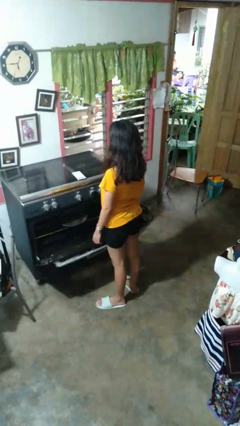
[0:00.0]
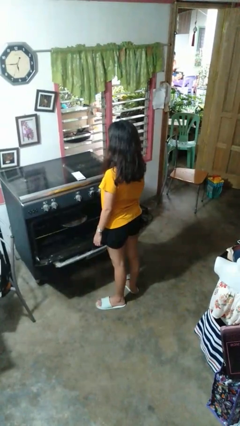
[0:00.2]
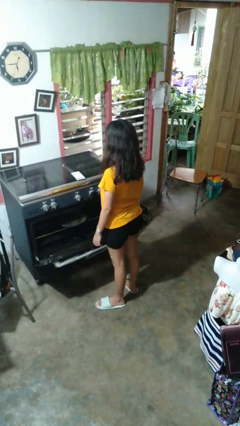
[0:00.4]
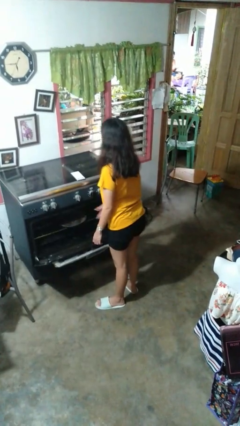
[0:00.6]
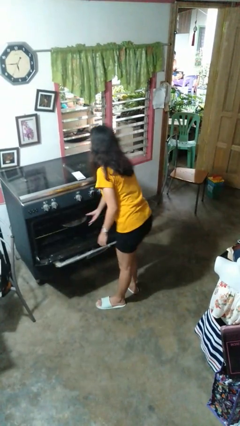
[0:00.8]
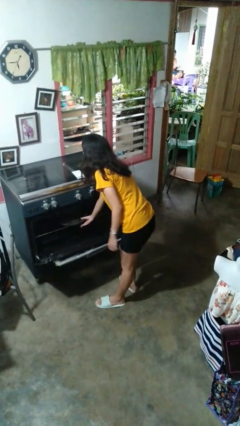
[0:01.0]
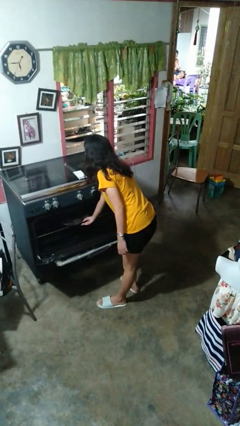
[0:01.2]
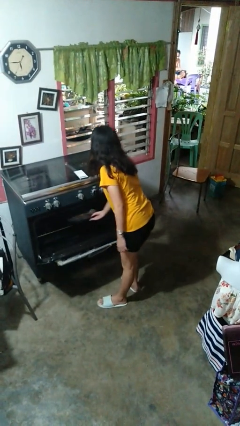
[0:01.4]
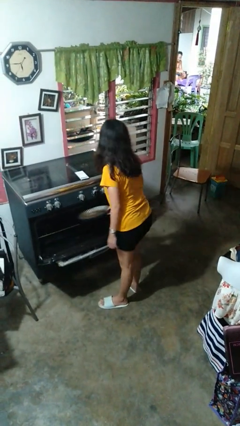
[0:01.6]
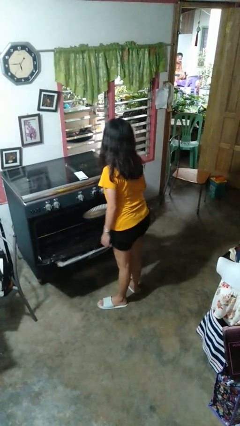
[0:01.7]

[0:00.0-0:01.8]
person takes object from oven

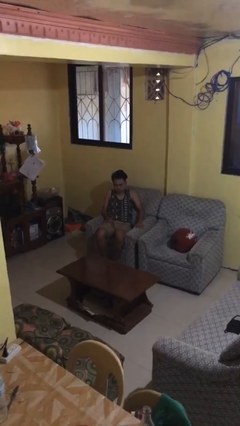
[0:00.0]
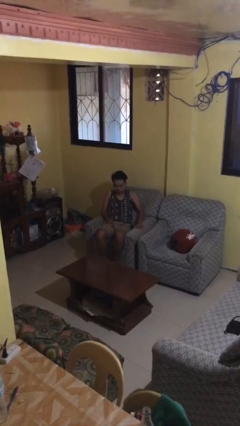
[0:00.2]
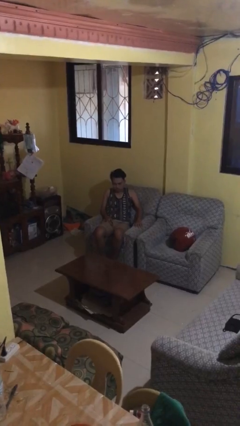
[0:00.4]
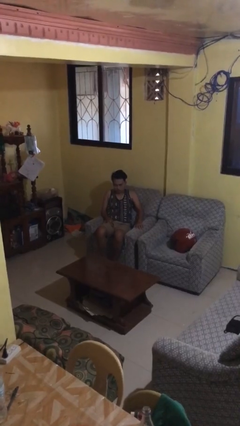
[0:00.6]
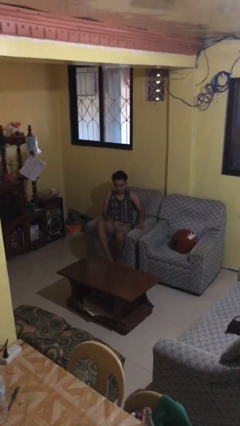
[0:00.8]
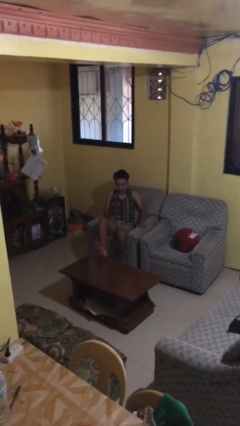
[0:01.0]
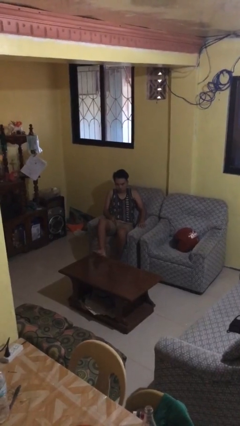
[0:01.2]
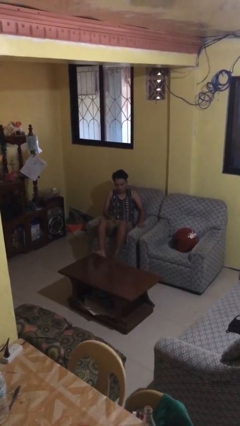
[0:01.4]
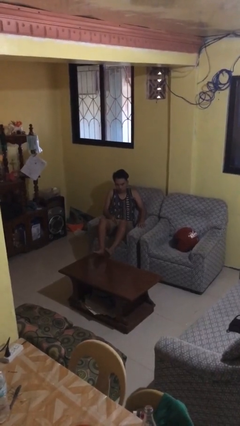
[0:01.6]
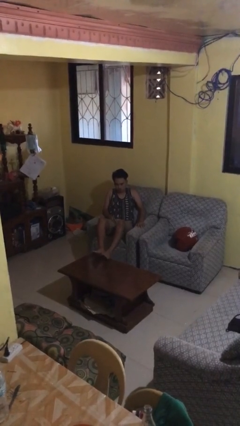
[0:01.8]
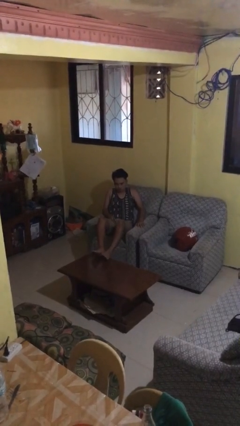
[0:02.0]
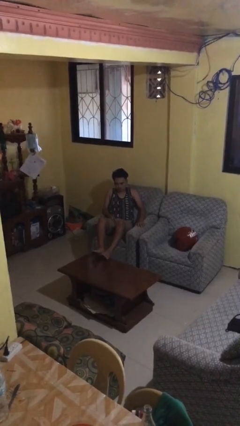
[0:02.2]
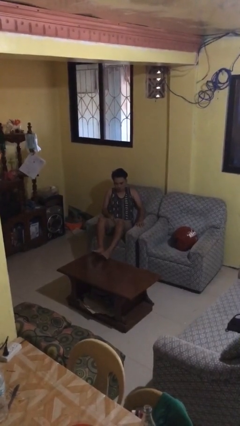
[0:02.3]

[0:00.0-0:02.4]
person puts feet up

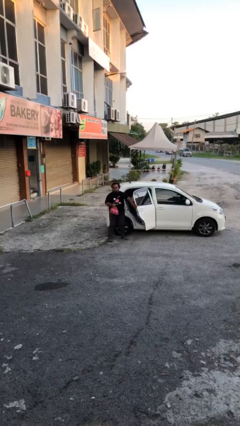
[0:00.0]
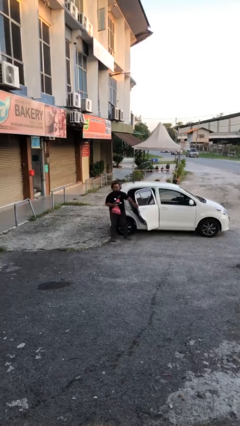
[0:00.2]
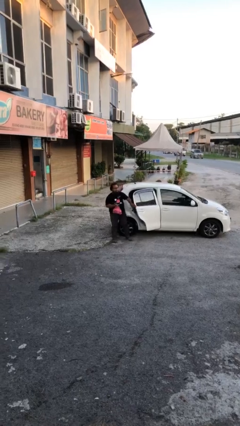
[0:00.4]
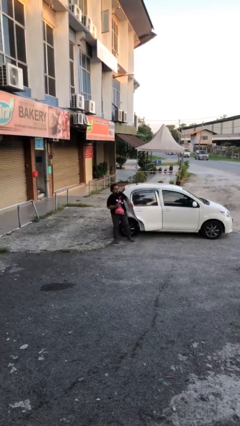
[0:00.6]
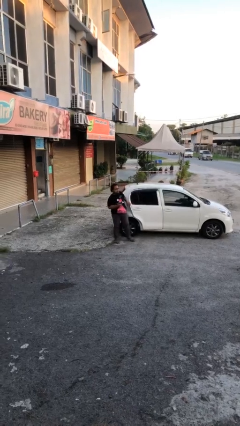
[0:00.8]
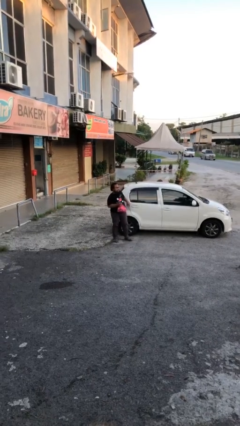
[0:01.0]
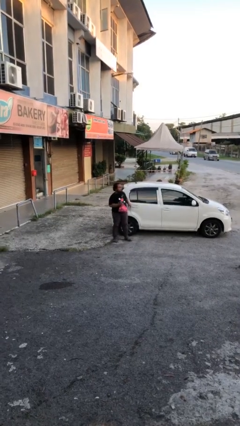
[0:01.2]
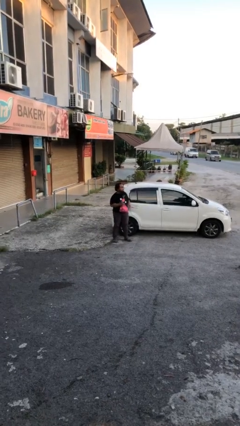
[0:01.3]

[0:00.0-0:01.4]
person closes car door

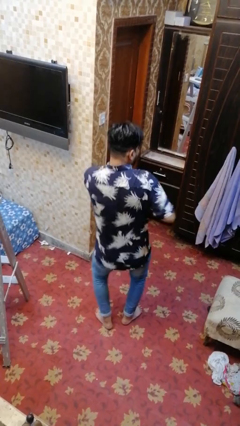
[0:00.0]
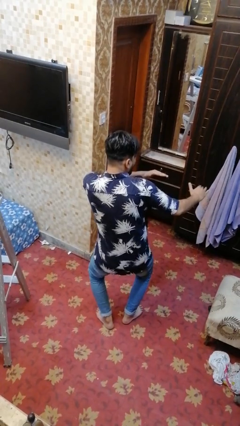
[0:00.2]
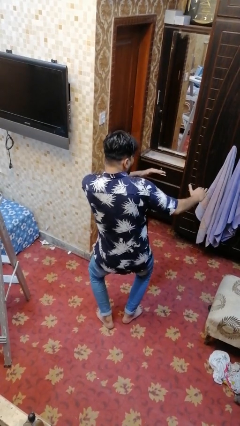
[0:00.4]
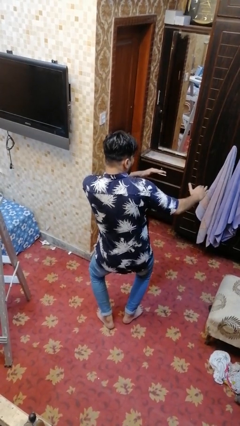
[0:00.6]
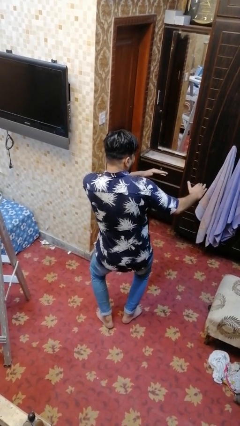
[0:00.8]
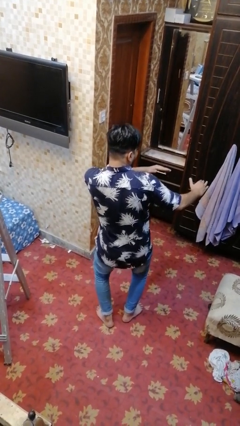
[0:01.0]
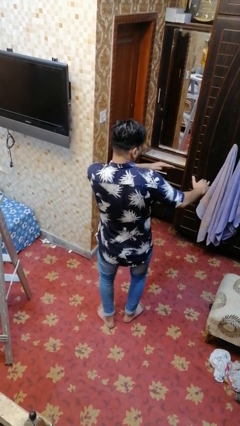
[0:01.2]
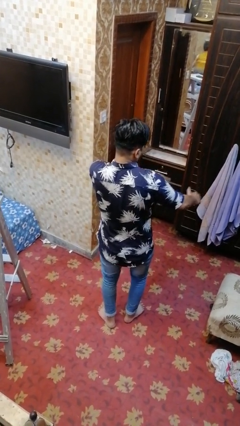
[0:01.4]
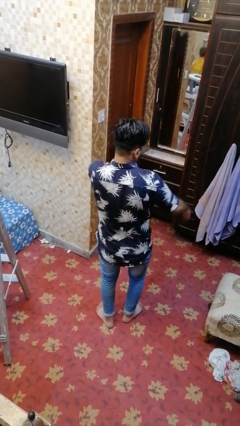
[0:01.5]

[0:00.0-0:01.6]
person karate chop

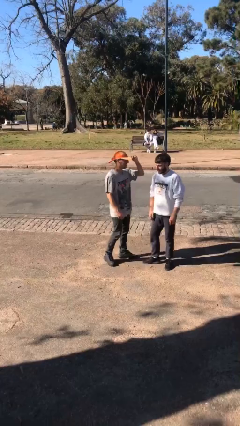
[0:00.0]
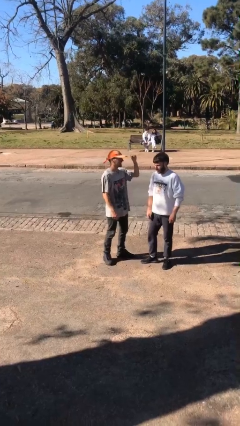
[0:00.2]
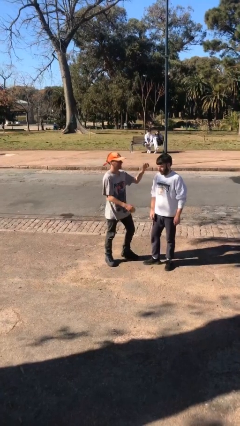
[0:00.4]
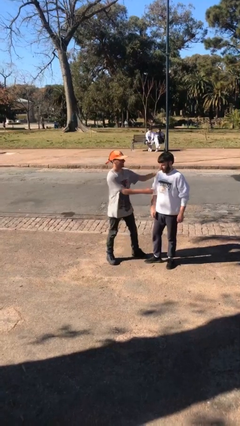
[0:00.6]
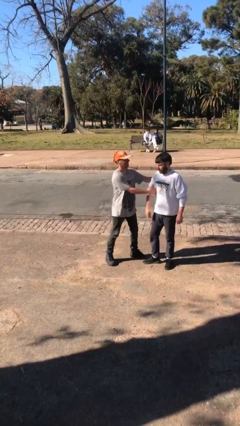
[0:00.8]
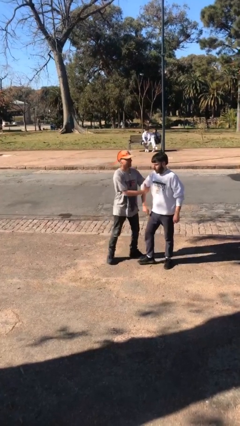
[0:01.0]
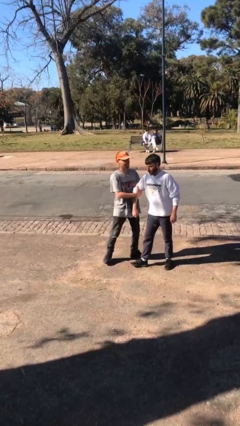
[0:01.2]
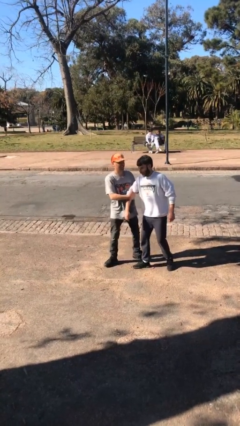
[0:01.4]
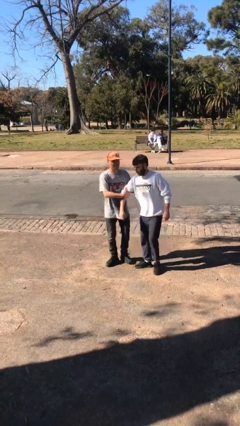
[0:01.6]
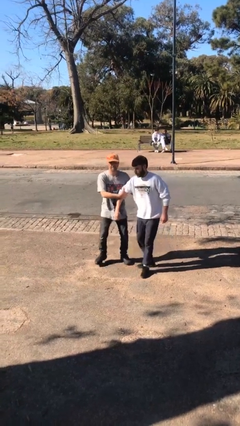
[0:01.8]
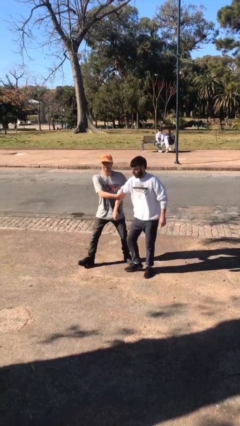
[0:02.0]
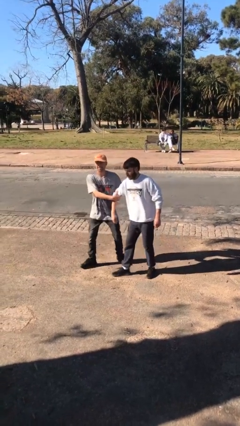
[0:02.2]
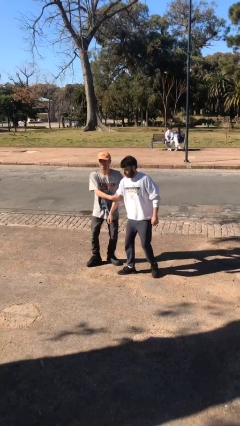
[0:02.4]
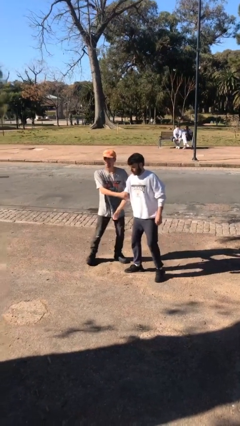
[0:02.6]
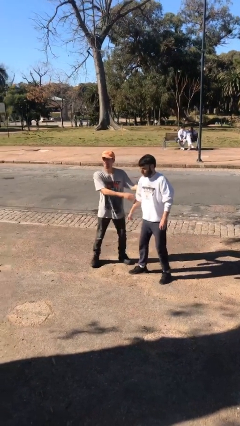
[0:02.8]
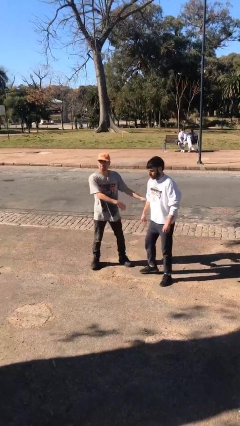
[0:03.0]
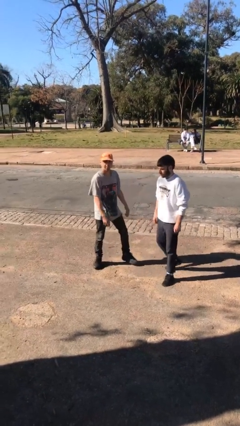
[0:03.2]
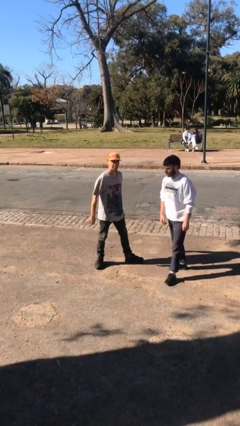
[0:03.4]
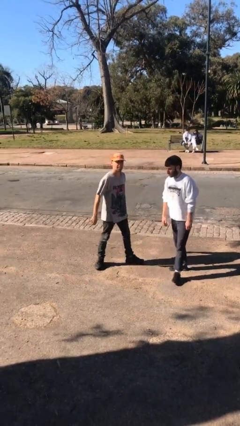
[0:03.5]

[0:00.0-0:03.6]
person grabs person by bicep

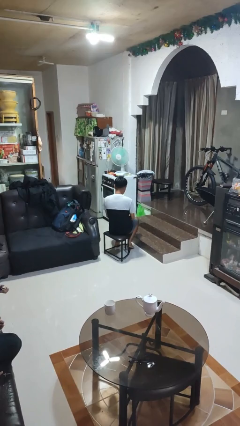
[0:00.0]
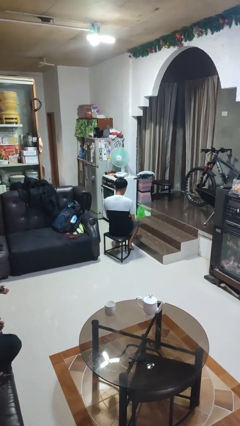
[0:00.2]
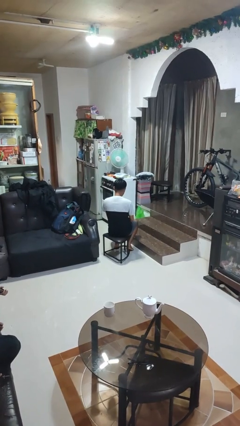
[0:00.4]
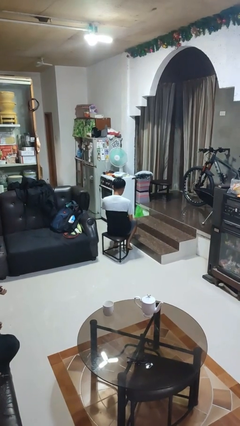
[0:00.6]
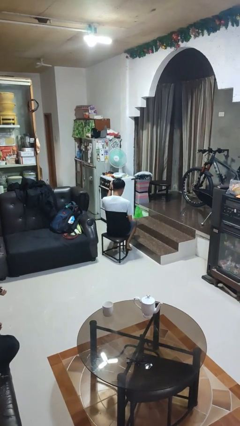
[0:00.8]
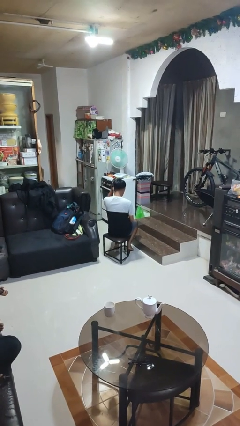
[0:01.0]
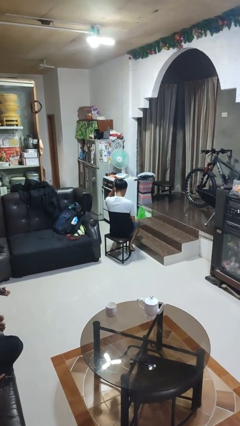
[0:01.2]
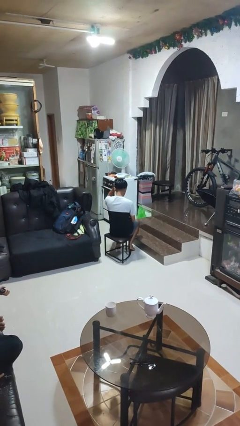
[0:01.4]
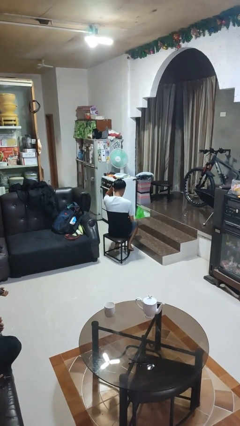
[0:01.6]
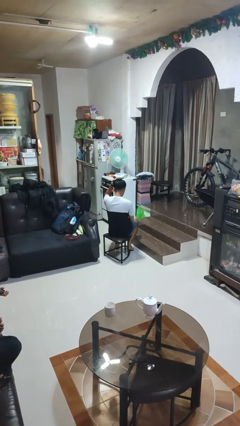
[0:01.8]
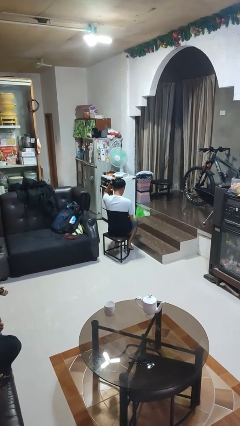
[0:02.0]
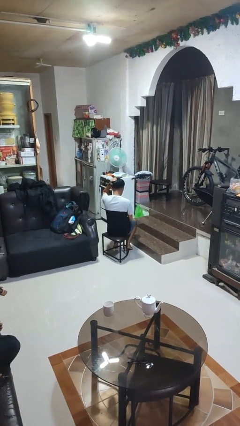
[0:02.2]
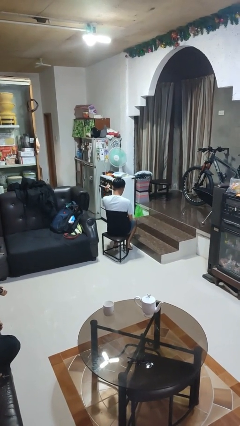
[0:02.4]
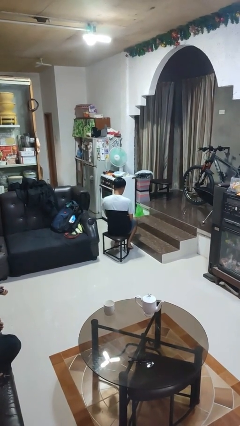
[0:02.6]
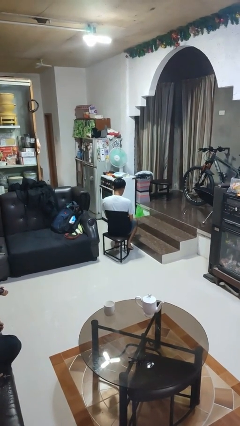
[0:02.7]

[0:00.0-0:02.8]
person pats head

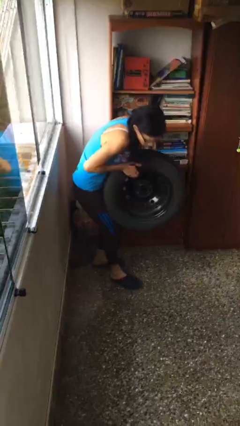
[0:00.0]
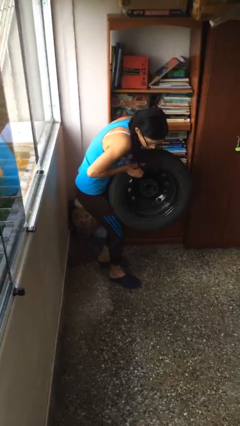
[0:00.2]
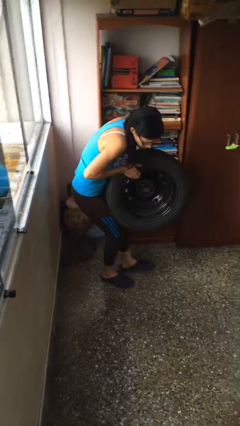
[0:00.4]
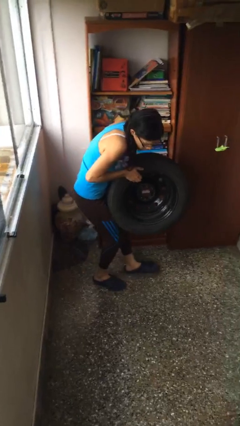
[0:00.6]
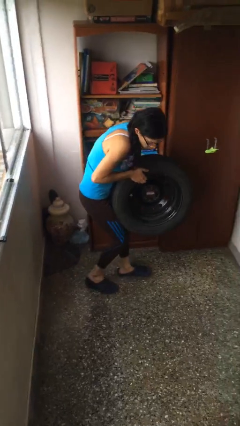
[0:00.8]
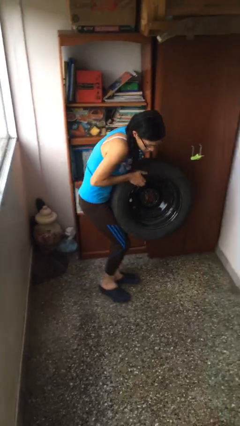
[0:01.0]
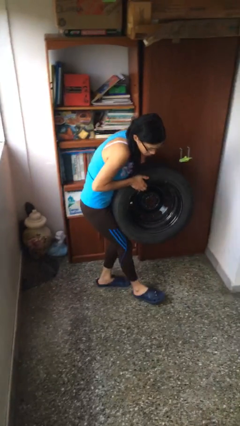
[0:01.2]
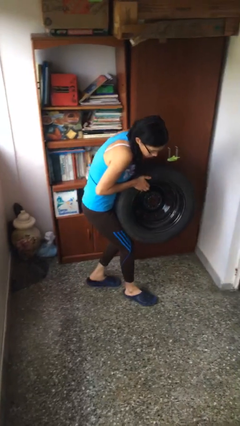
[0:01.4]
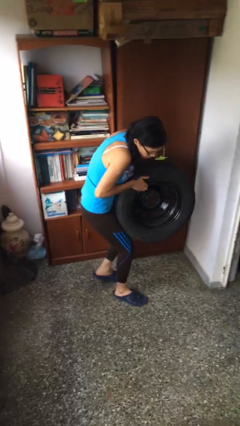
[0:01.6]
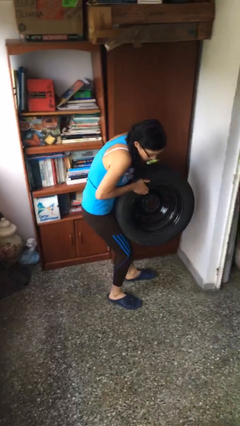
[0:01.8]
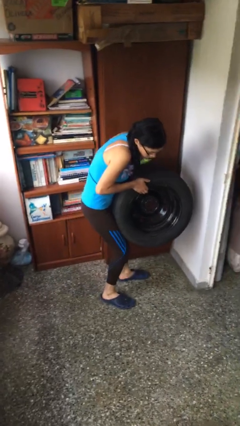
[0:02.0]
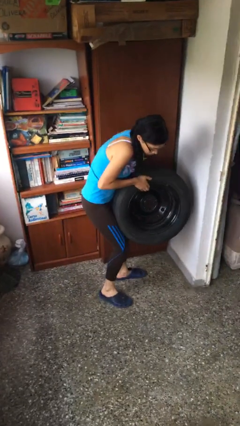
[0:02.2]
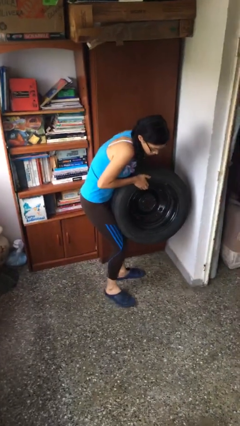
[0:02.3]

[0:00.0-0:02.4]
person carries heavy object

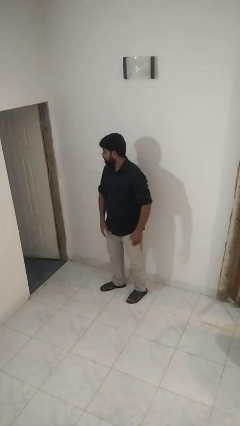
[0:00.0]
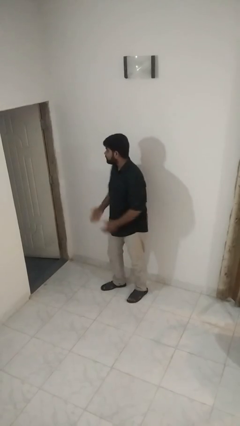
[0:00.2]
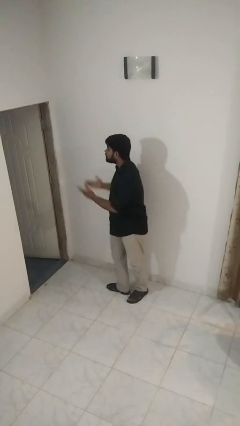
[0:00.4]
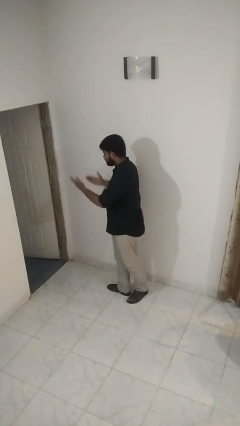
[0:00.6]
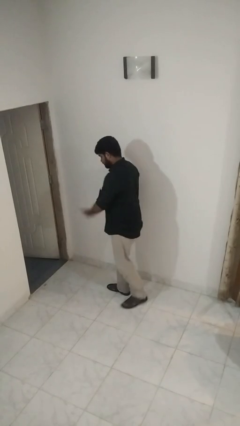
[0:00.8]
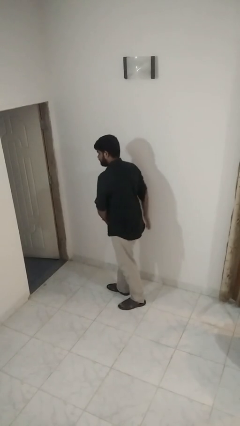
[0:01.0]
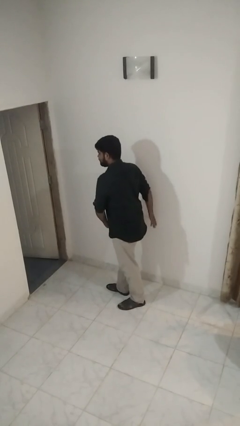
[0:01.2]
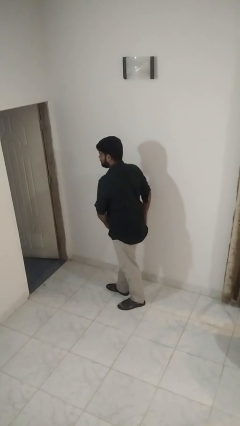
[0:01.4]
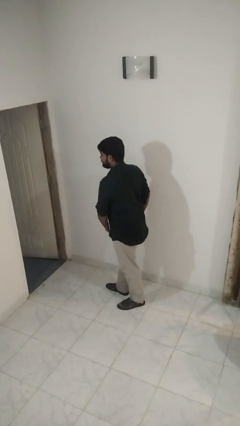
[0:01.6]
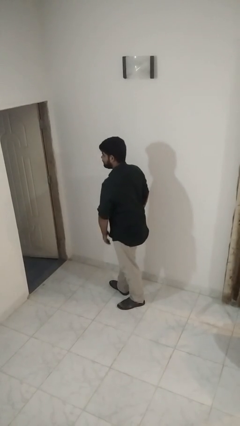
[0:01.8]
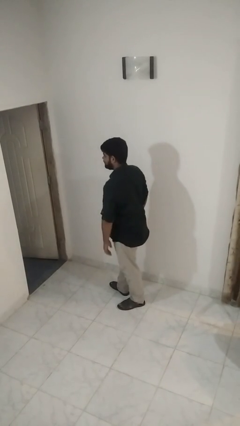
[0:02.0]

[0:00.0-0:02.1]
person gestures come here